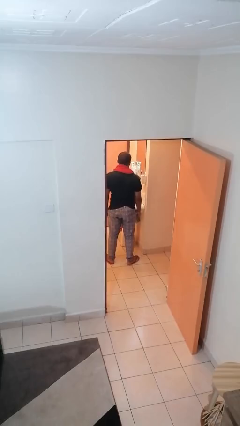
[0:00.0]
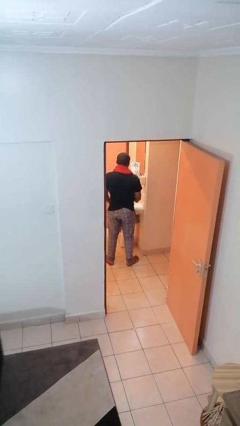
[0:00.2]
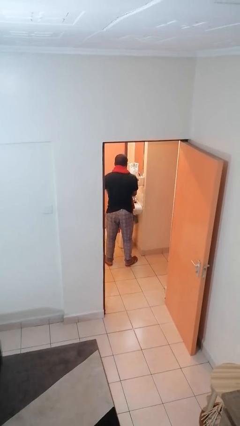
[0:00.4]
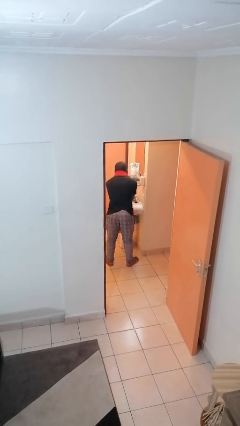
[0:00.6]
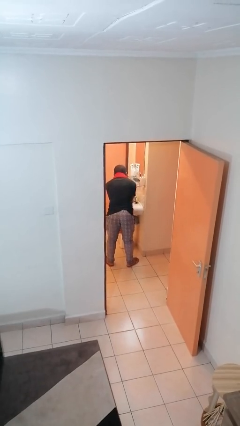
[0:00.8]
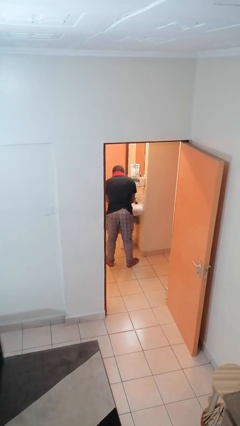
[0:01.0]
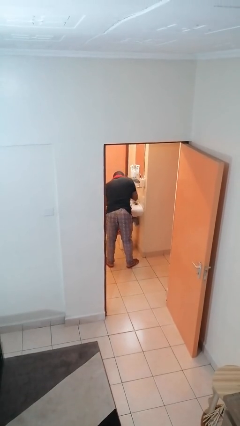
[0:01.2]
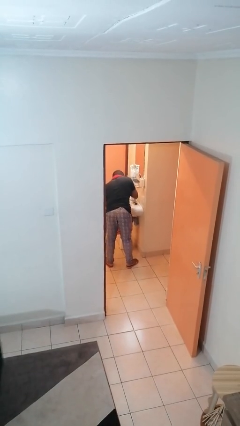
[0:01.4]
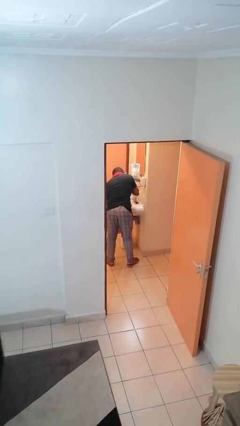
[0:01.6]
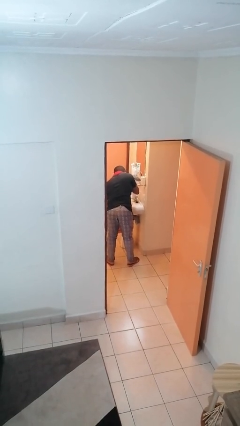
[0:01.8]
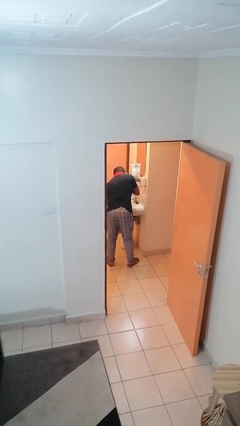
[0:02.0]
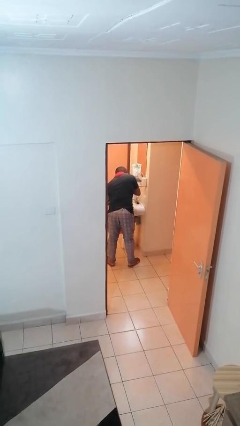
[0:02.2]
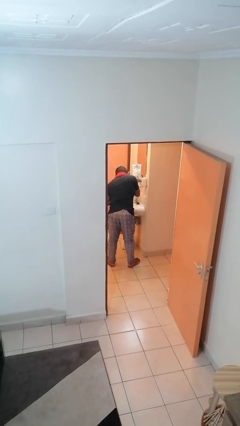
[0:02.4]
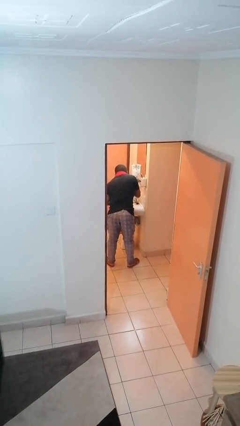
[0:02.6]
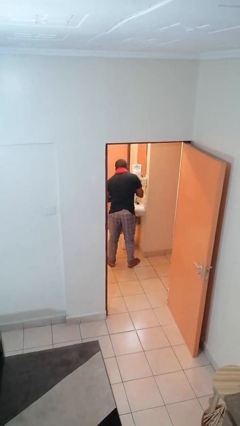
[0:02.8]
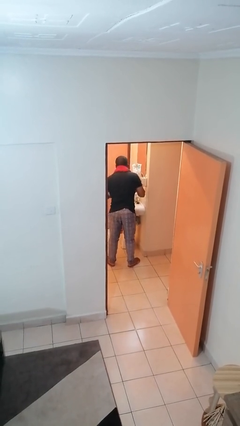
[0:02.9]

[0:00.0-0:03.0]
person washes face

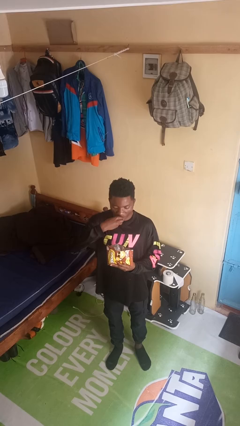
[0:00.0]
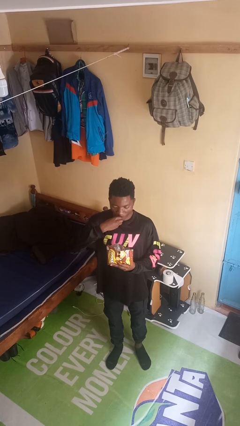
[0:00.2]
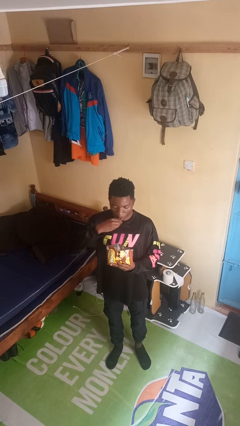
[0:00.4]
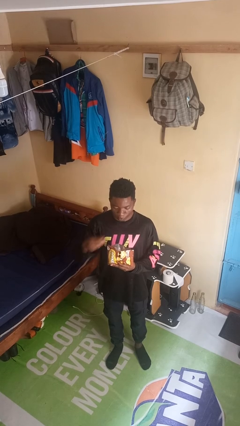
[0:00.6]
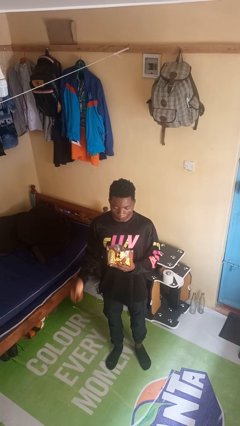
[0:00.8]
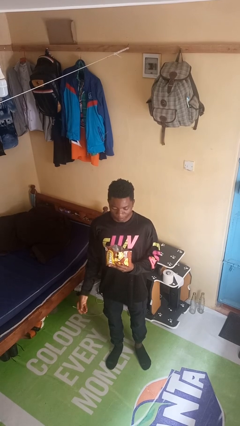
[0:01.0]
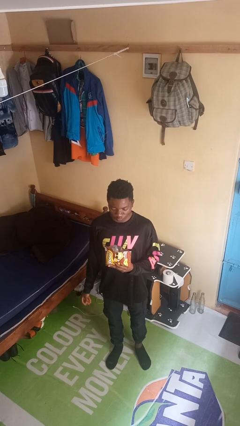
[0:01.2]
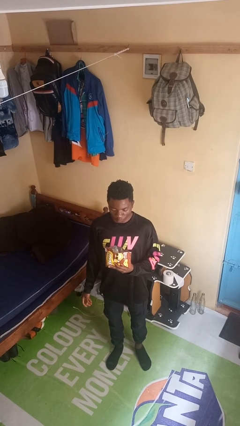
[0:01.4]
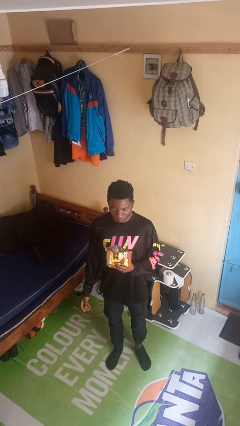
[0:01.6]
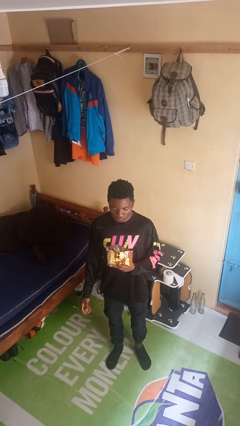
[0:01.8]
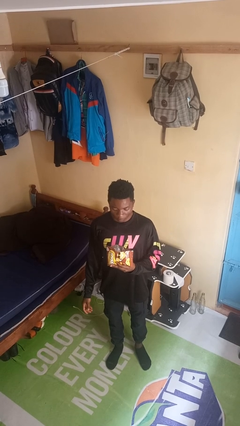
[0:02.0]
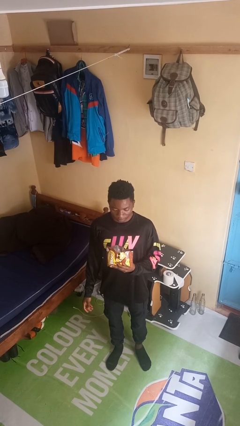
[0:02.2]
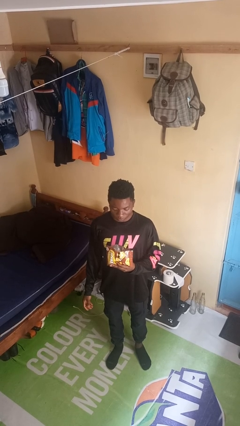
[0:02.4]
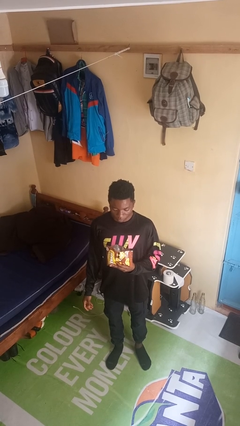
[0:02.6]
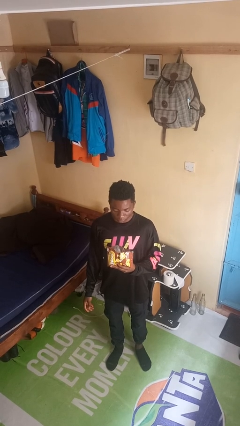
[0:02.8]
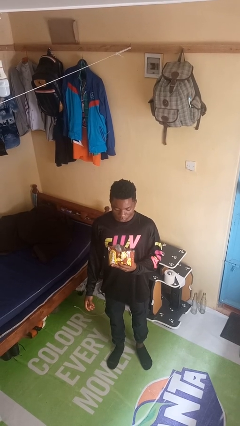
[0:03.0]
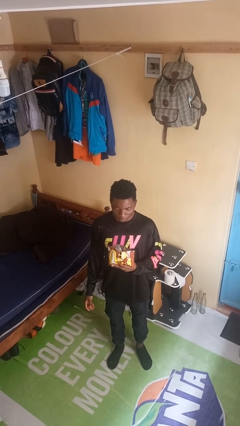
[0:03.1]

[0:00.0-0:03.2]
person eats snack from bag

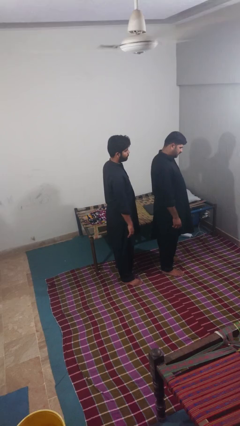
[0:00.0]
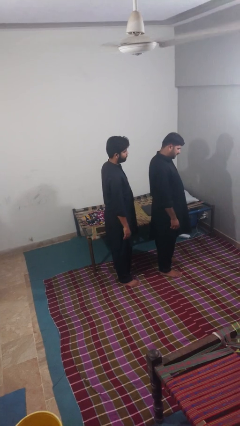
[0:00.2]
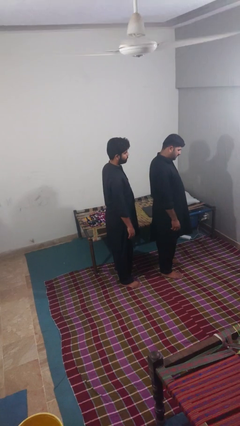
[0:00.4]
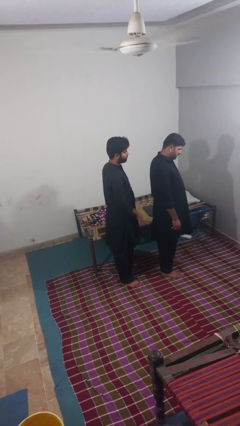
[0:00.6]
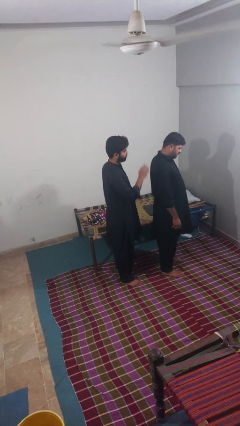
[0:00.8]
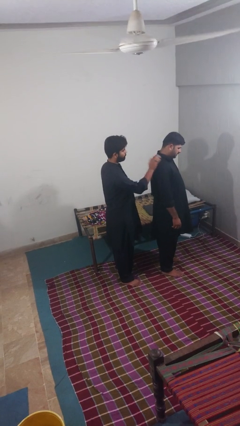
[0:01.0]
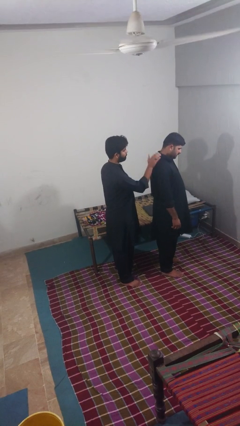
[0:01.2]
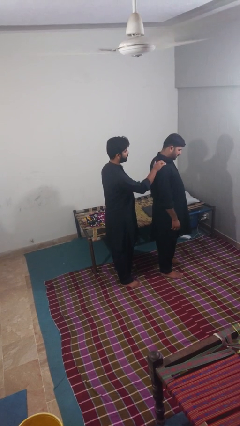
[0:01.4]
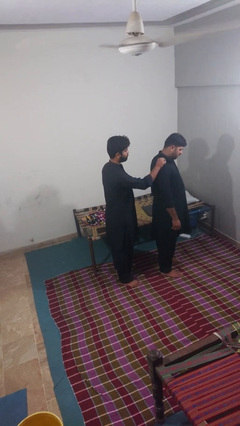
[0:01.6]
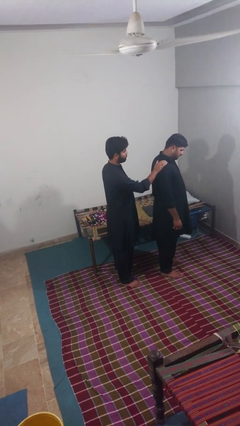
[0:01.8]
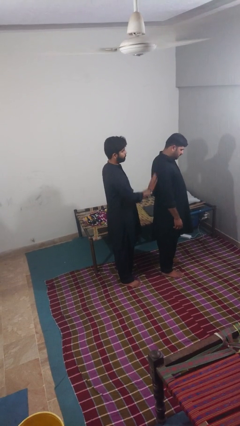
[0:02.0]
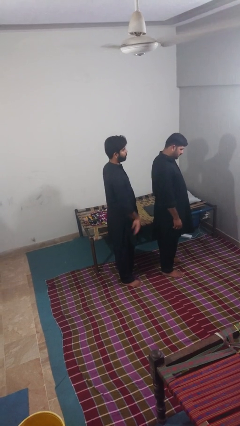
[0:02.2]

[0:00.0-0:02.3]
person touches back of person

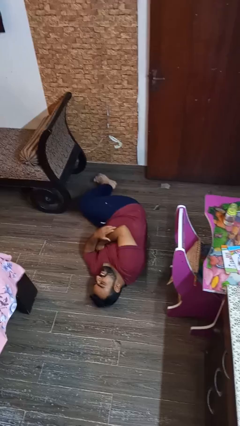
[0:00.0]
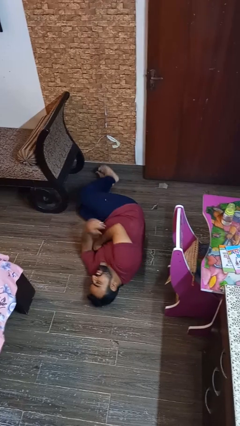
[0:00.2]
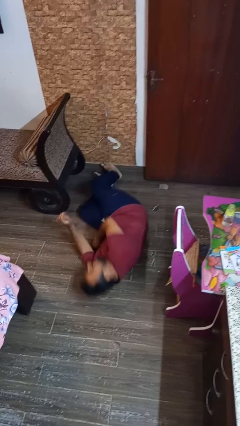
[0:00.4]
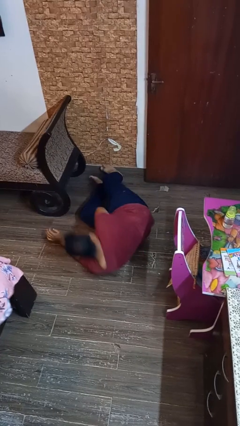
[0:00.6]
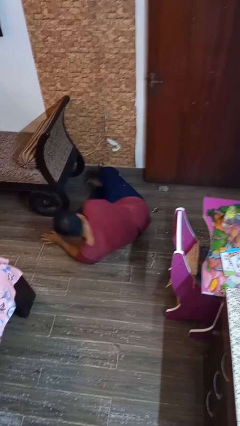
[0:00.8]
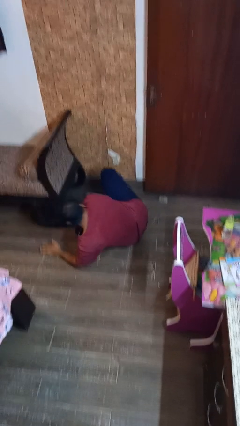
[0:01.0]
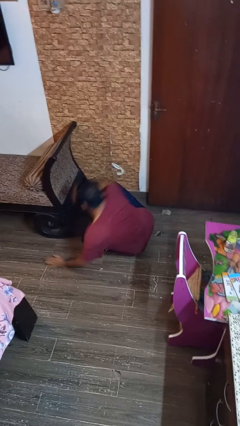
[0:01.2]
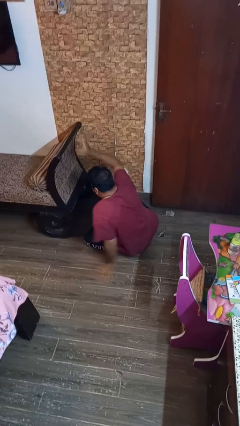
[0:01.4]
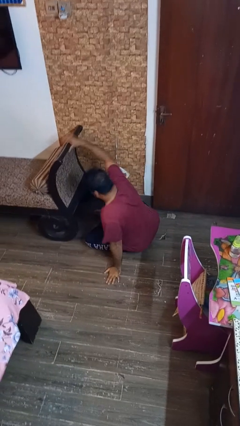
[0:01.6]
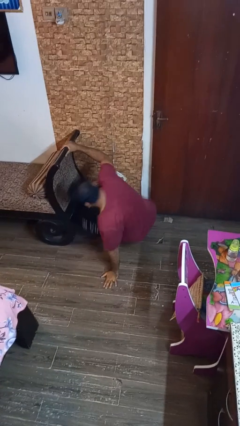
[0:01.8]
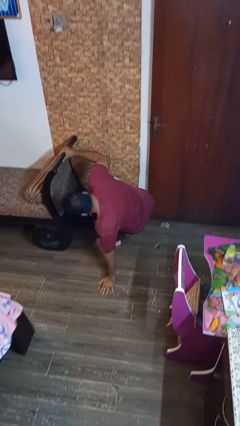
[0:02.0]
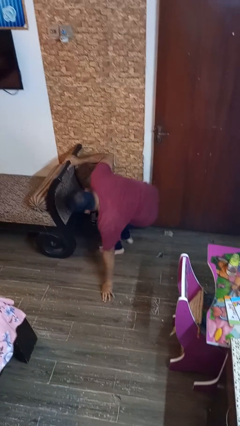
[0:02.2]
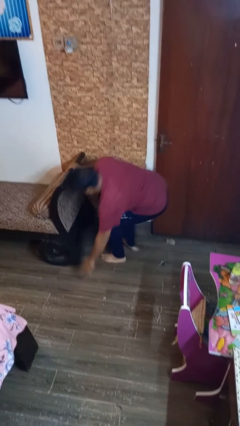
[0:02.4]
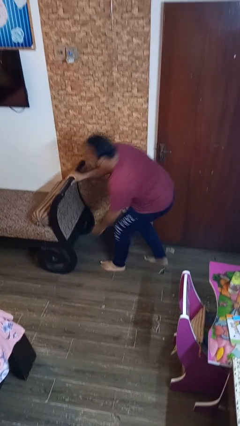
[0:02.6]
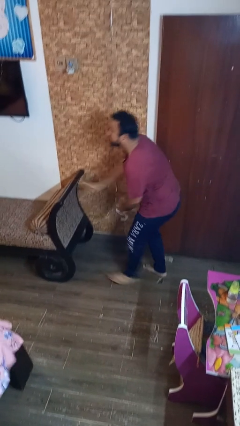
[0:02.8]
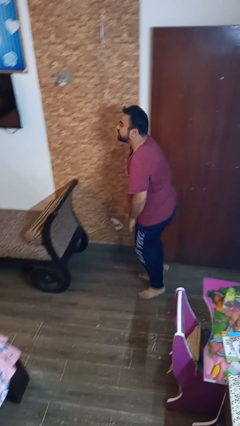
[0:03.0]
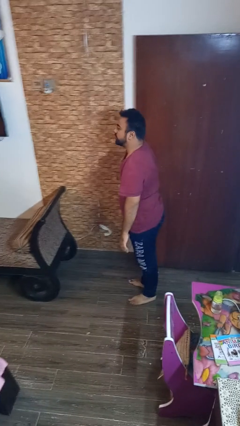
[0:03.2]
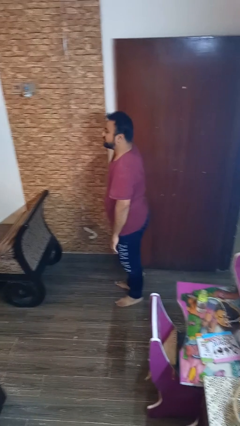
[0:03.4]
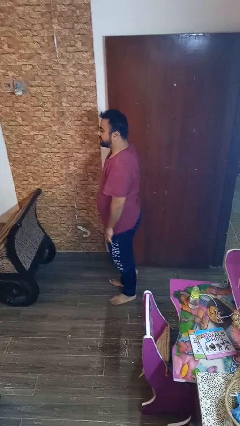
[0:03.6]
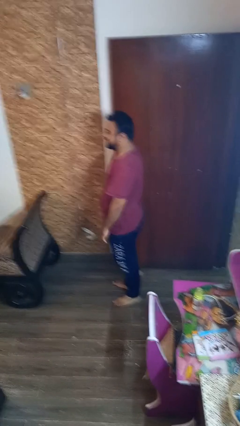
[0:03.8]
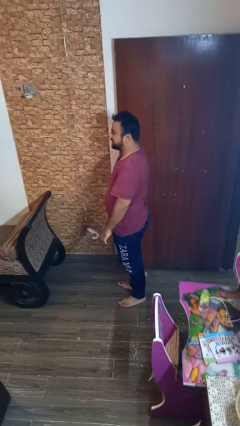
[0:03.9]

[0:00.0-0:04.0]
person stands up from floor

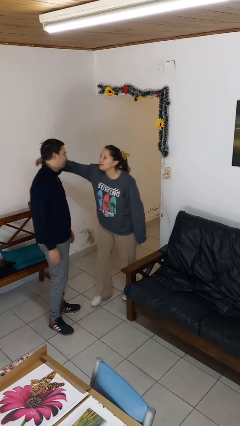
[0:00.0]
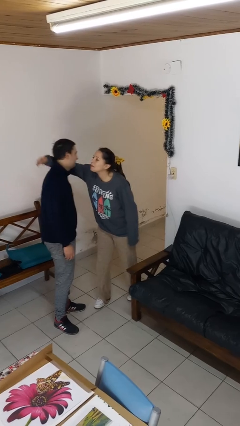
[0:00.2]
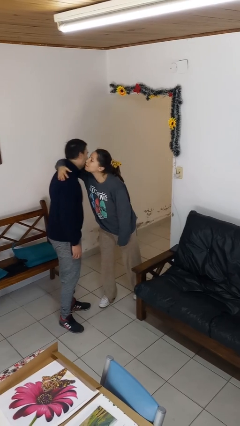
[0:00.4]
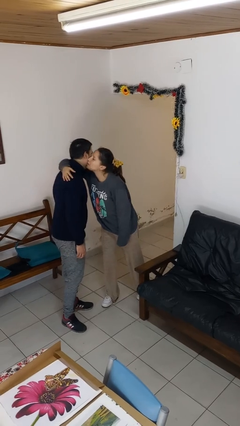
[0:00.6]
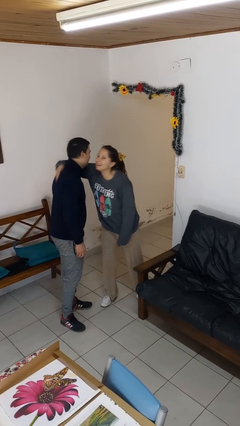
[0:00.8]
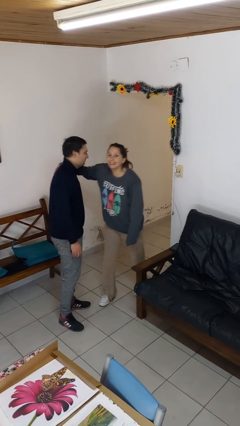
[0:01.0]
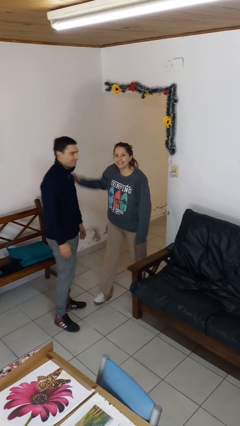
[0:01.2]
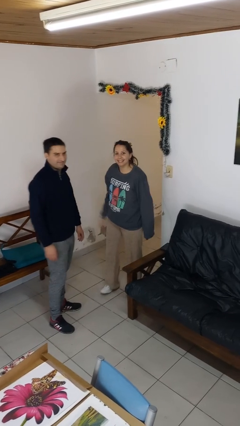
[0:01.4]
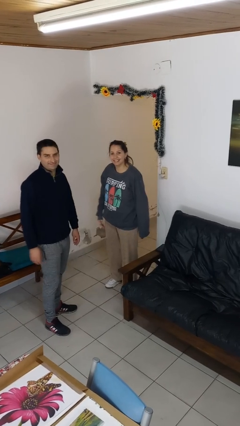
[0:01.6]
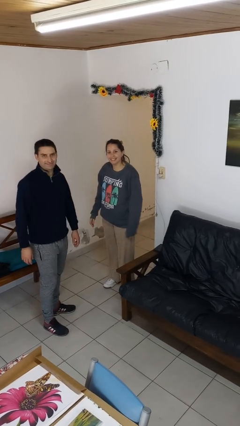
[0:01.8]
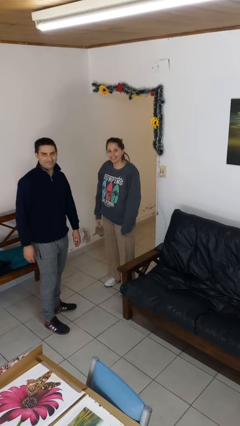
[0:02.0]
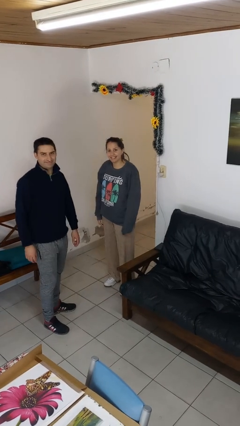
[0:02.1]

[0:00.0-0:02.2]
person kisses cheek of person

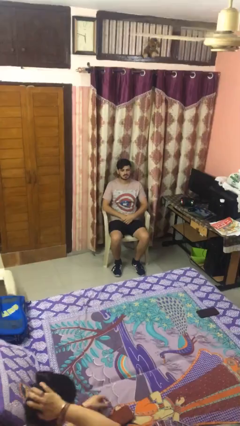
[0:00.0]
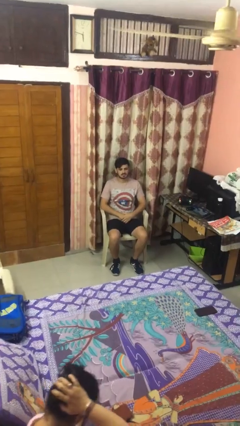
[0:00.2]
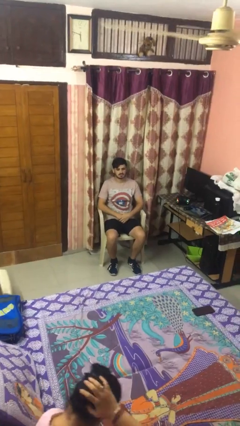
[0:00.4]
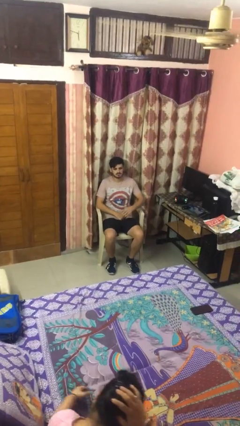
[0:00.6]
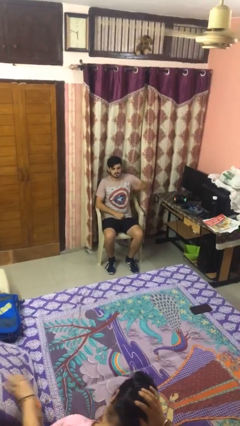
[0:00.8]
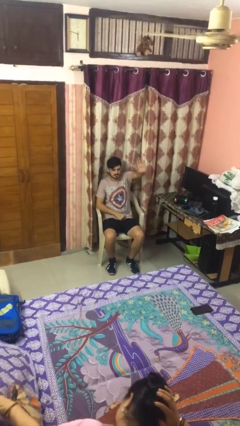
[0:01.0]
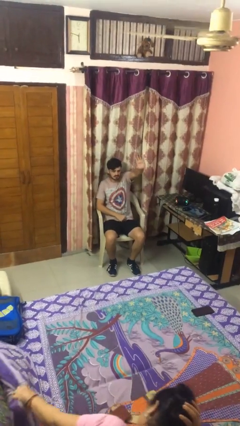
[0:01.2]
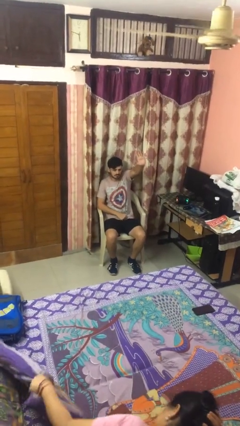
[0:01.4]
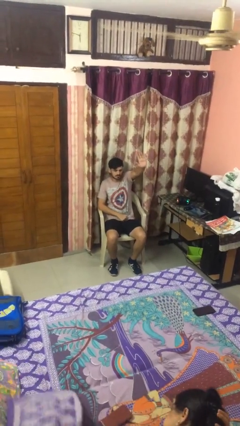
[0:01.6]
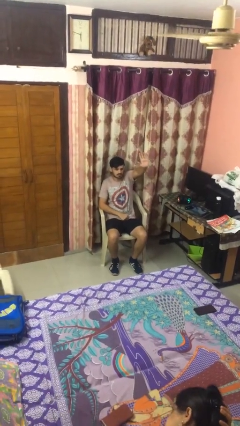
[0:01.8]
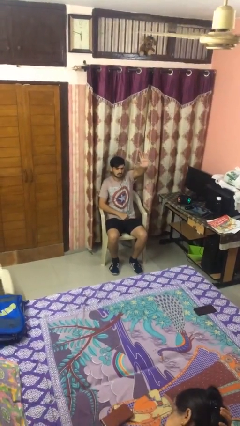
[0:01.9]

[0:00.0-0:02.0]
person gestures raise hand

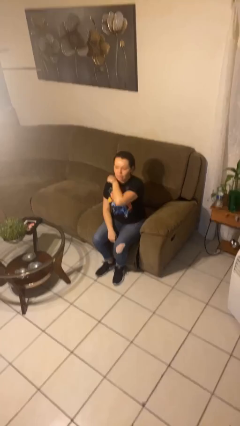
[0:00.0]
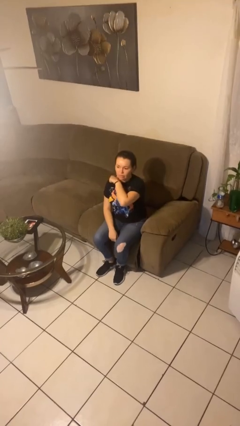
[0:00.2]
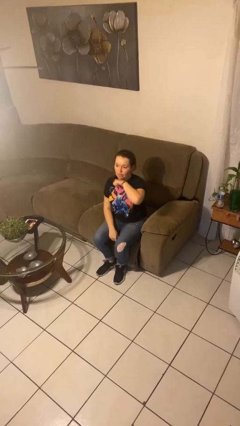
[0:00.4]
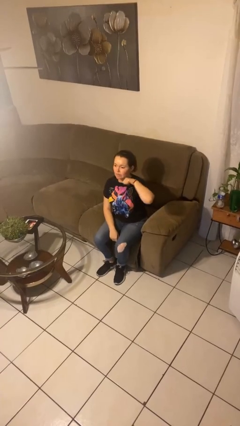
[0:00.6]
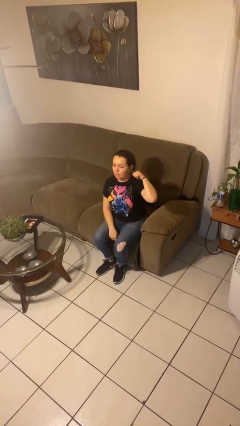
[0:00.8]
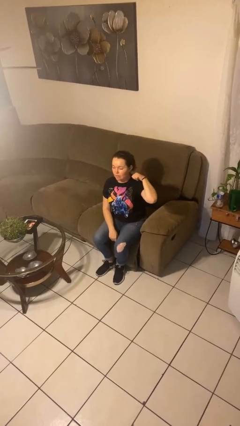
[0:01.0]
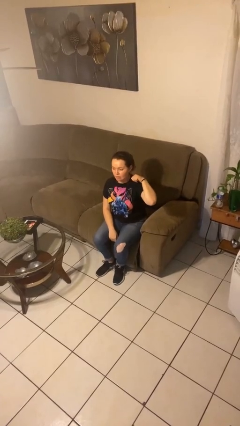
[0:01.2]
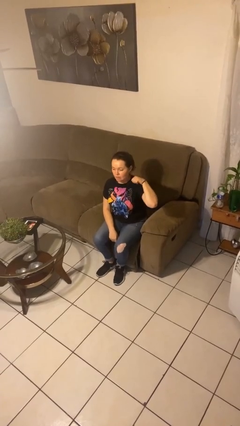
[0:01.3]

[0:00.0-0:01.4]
person gestures cut
